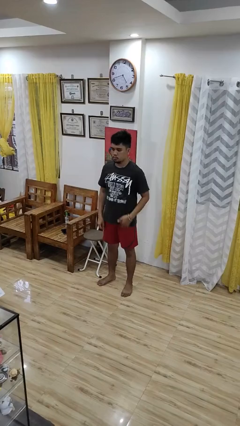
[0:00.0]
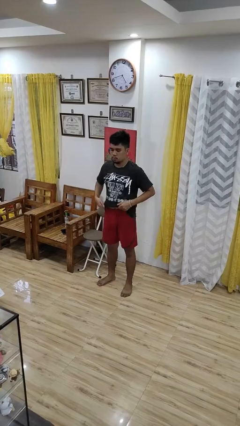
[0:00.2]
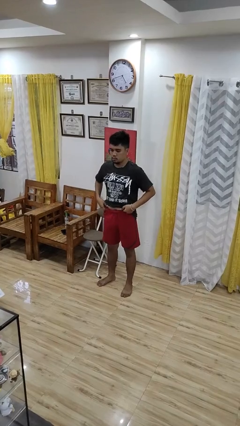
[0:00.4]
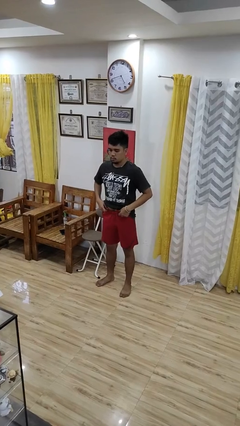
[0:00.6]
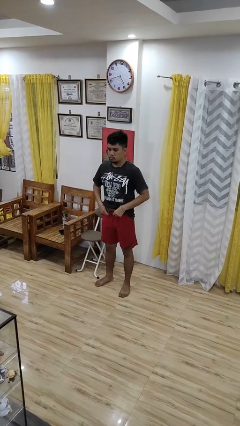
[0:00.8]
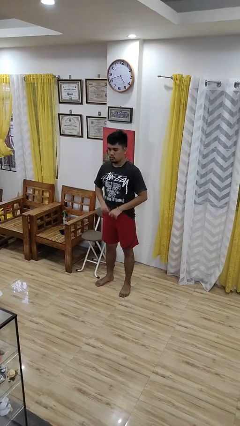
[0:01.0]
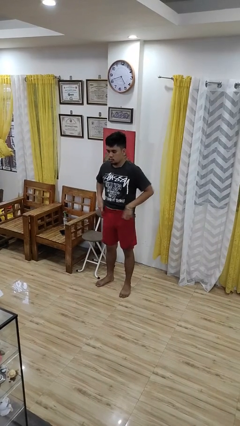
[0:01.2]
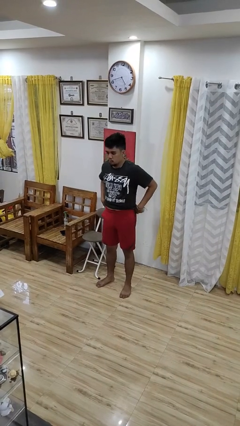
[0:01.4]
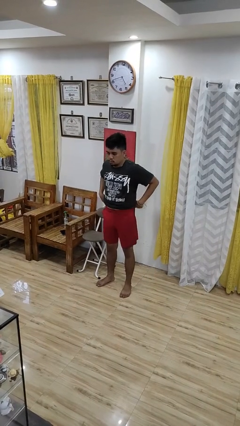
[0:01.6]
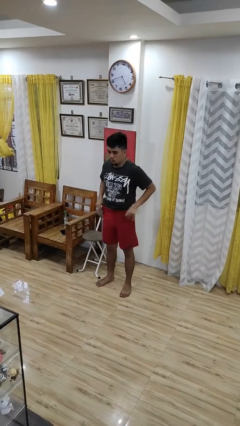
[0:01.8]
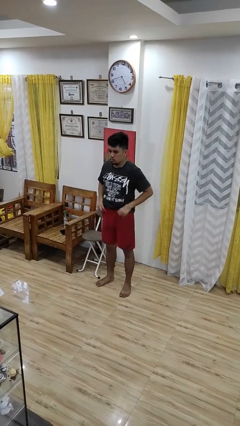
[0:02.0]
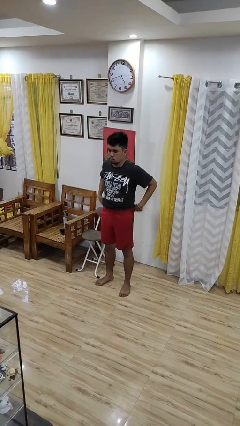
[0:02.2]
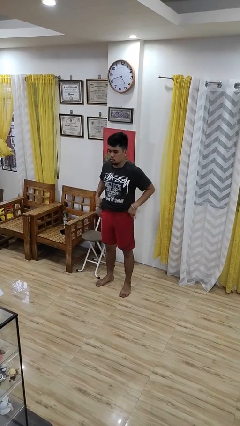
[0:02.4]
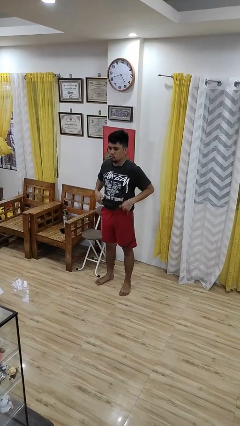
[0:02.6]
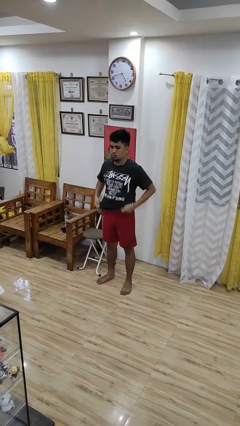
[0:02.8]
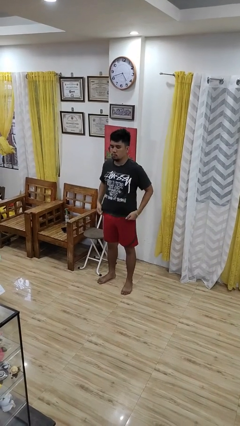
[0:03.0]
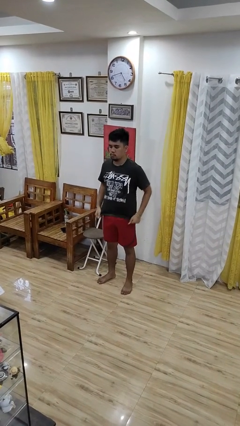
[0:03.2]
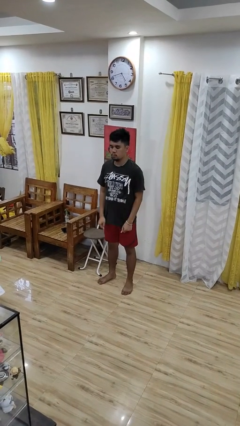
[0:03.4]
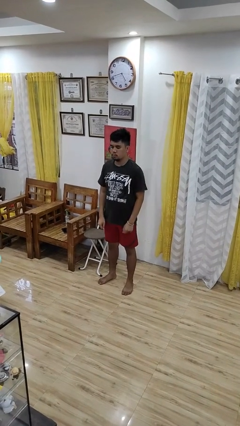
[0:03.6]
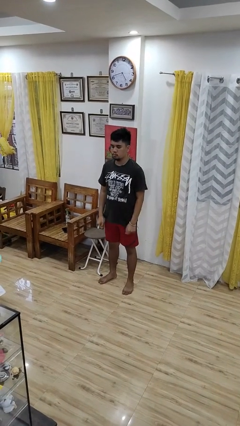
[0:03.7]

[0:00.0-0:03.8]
person hikes up pants

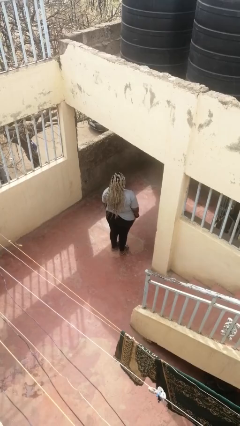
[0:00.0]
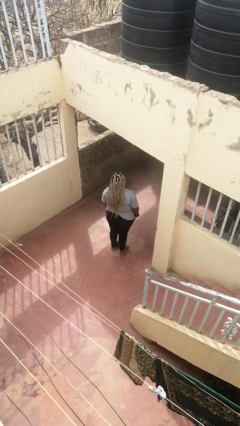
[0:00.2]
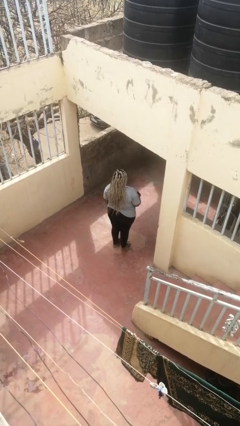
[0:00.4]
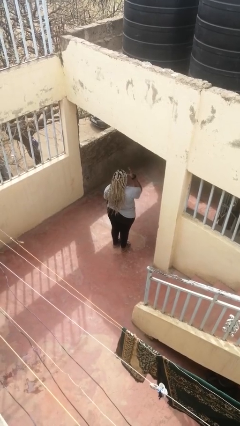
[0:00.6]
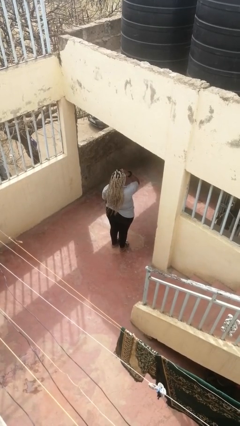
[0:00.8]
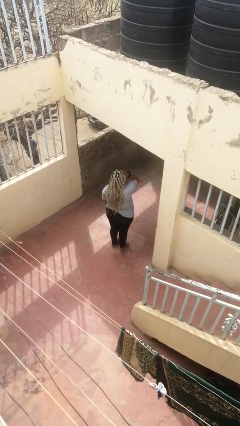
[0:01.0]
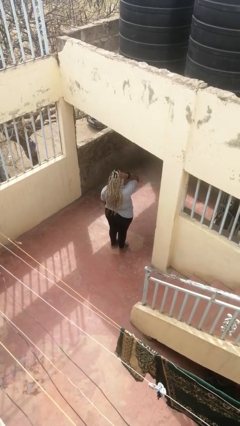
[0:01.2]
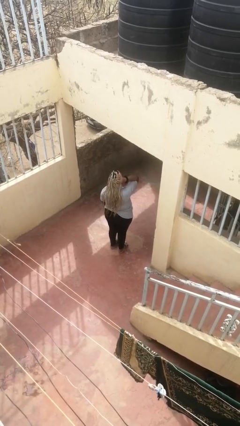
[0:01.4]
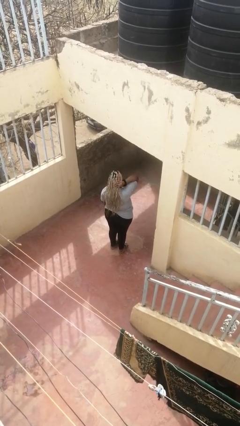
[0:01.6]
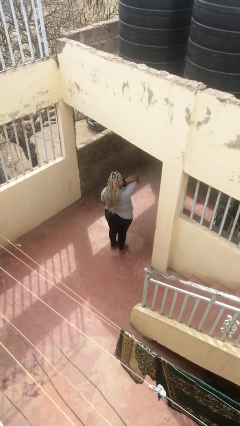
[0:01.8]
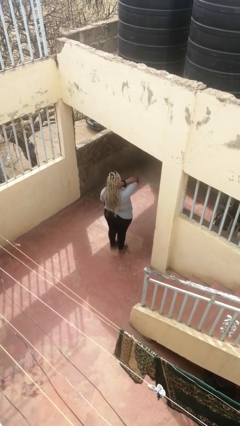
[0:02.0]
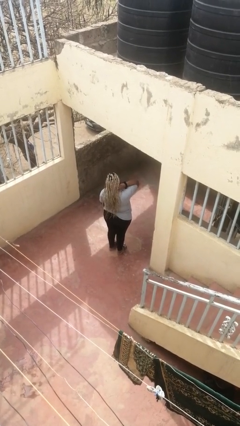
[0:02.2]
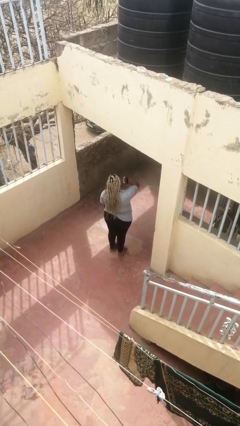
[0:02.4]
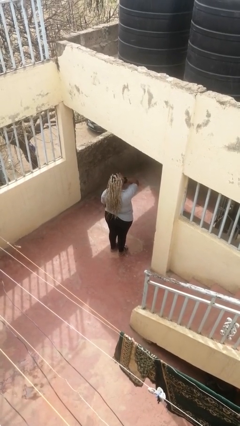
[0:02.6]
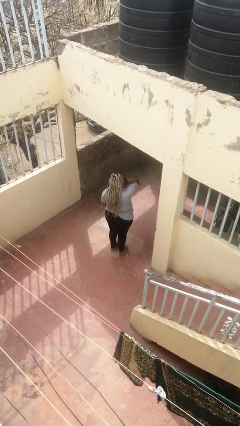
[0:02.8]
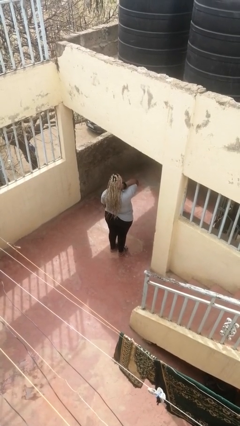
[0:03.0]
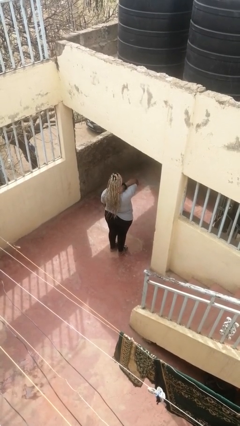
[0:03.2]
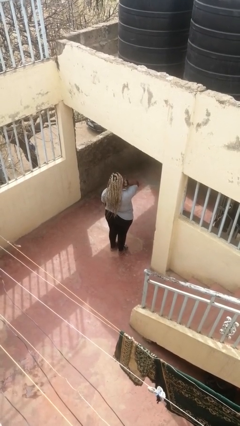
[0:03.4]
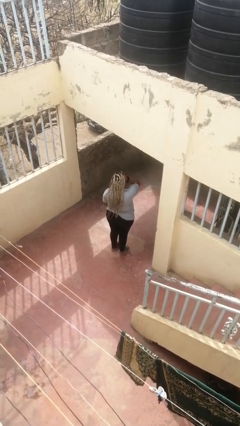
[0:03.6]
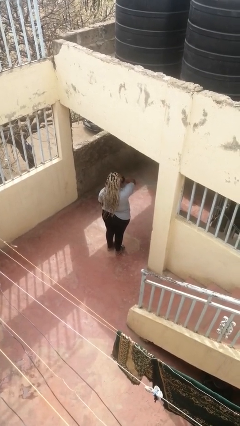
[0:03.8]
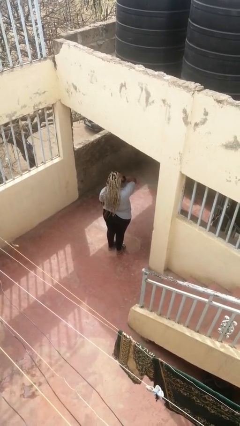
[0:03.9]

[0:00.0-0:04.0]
person strokes hair

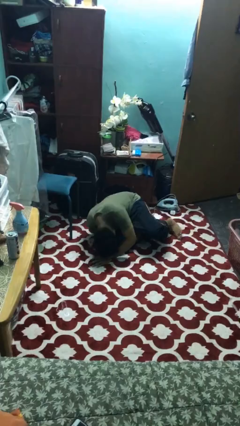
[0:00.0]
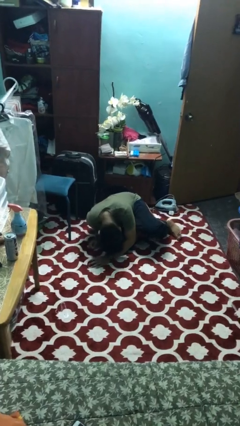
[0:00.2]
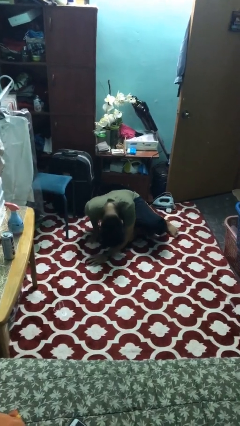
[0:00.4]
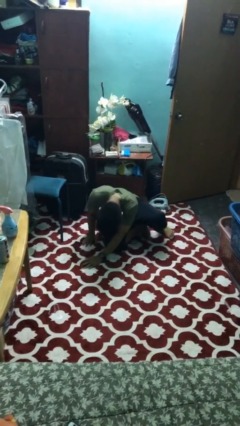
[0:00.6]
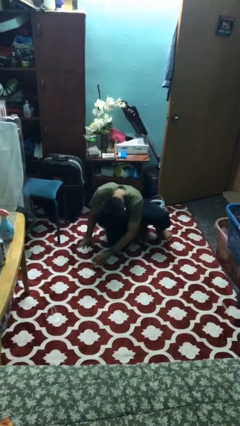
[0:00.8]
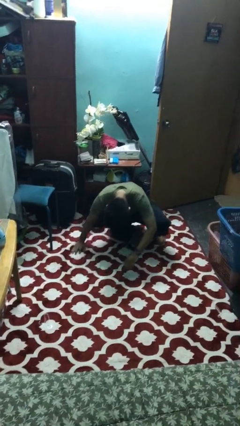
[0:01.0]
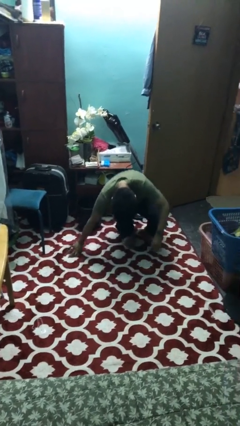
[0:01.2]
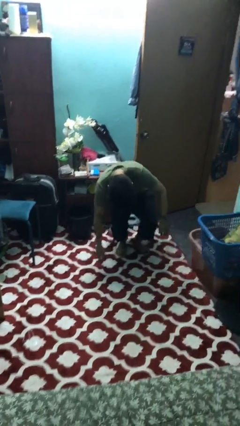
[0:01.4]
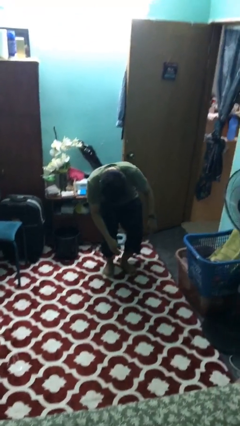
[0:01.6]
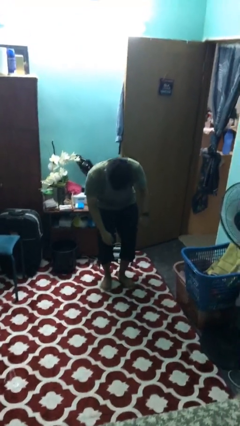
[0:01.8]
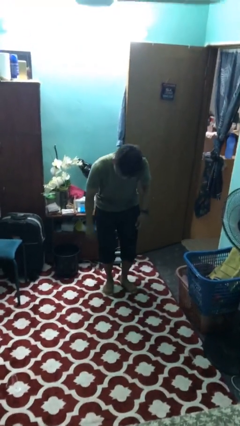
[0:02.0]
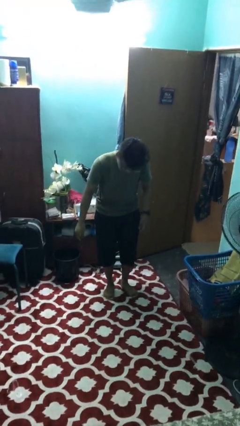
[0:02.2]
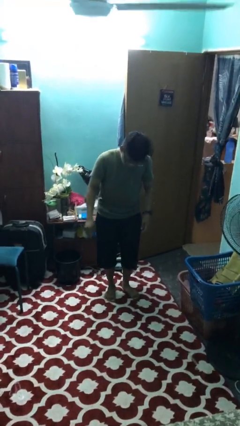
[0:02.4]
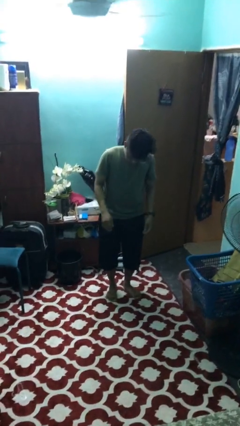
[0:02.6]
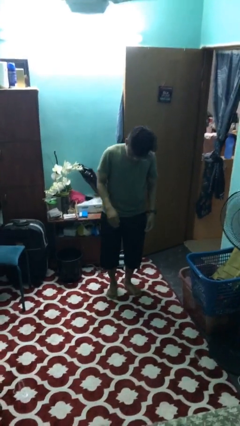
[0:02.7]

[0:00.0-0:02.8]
person stands up from floor

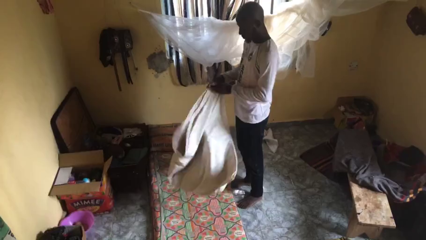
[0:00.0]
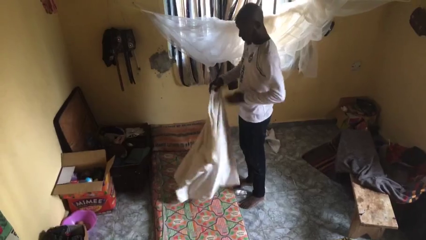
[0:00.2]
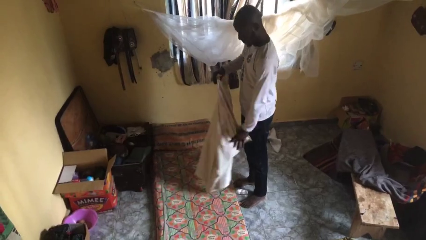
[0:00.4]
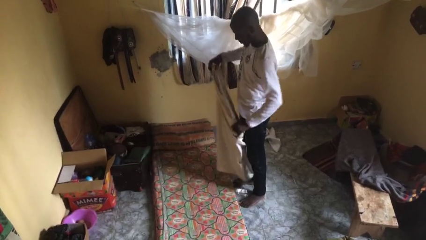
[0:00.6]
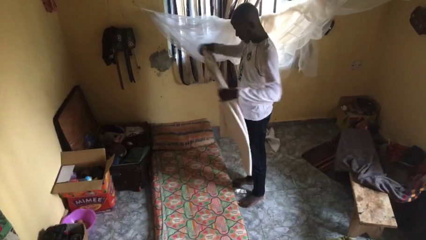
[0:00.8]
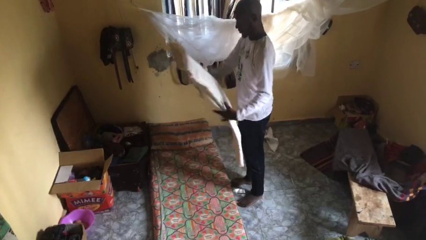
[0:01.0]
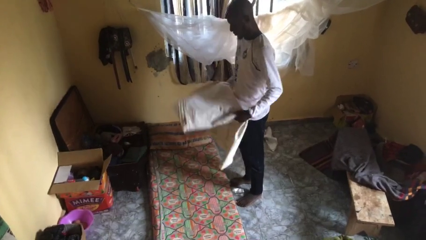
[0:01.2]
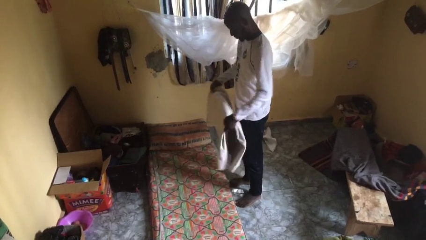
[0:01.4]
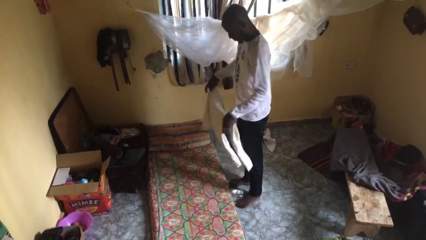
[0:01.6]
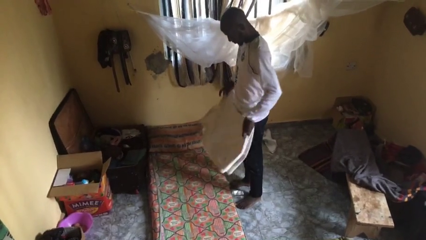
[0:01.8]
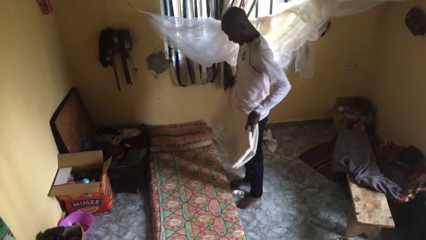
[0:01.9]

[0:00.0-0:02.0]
person folds blanket

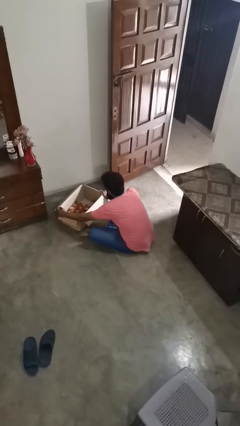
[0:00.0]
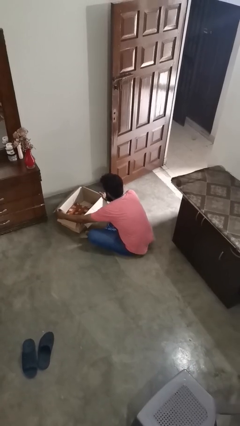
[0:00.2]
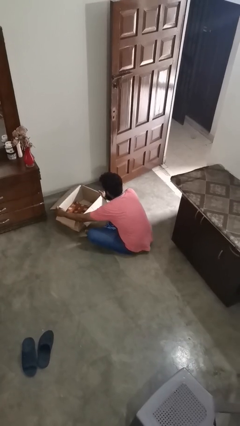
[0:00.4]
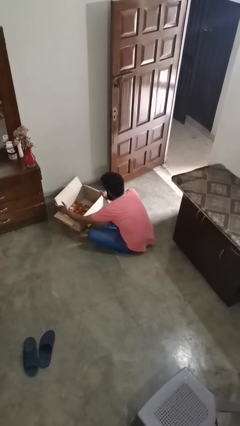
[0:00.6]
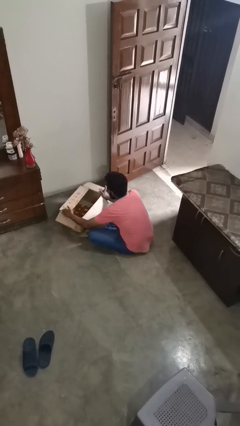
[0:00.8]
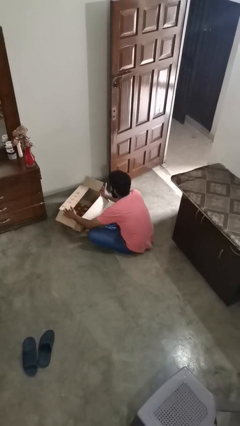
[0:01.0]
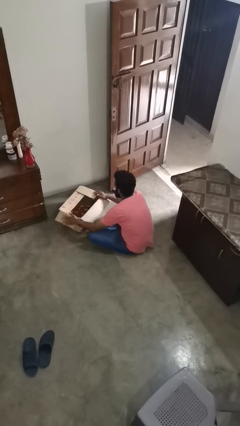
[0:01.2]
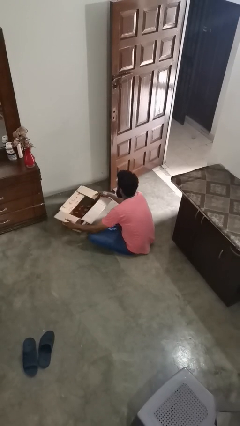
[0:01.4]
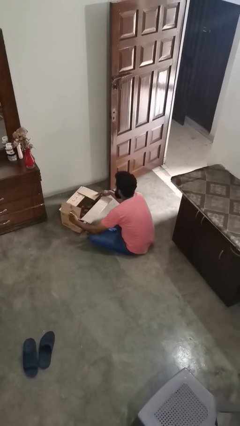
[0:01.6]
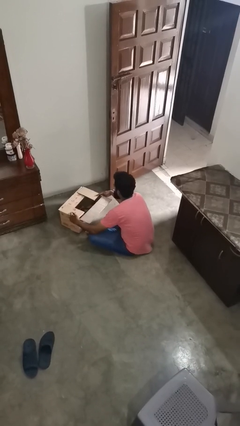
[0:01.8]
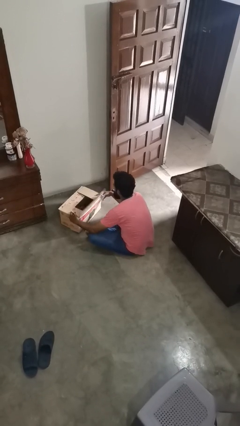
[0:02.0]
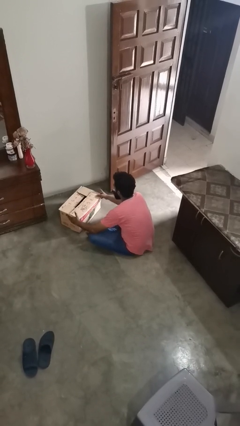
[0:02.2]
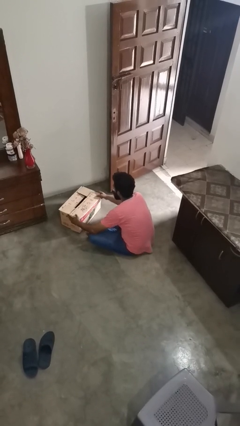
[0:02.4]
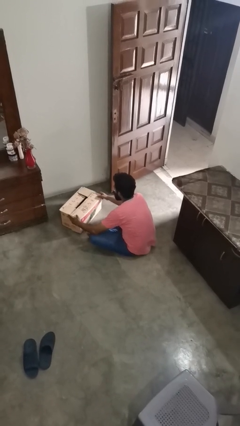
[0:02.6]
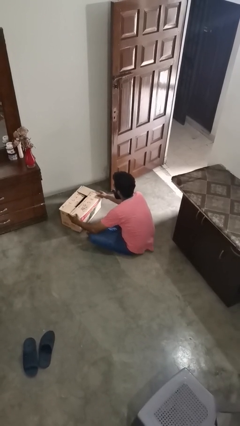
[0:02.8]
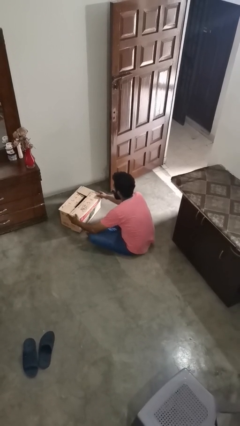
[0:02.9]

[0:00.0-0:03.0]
person closes box

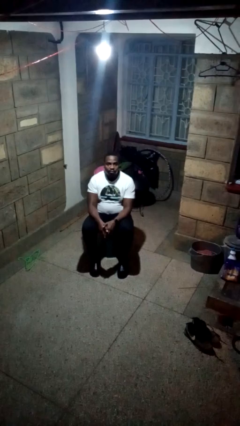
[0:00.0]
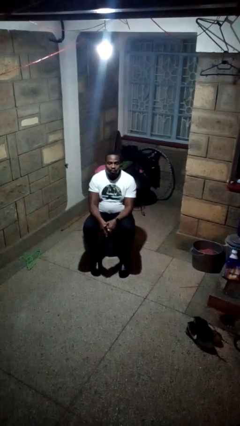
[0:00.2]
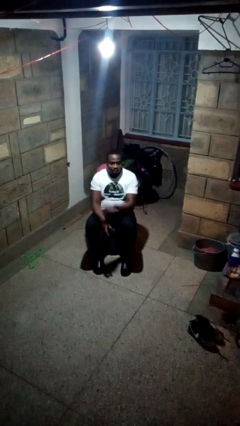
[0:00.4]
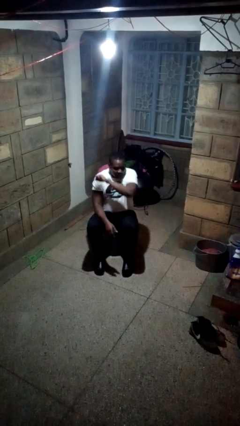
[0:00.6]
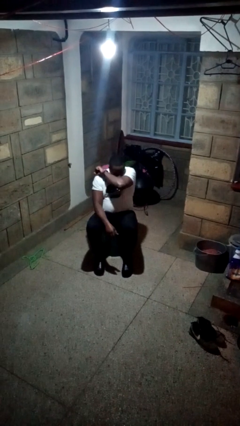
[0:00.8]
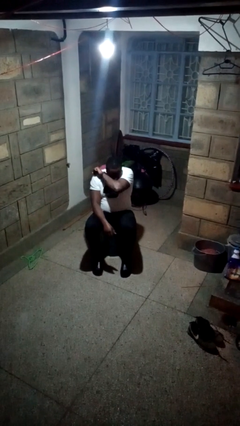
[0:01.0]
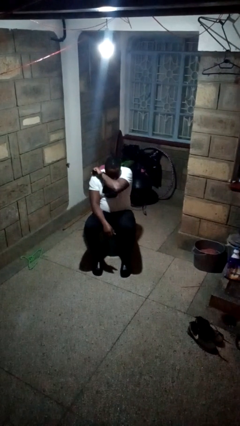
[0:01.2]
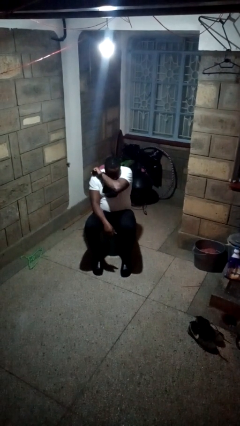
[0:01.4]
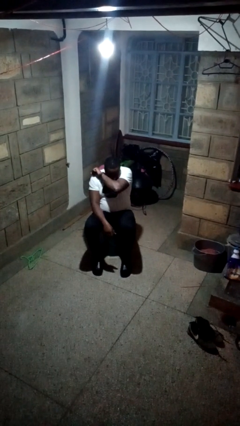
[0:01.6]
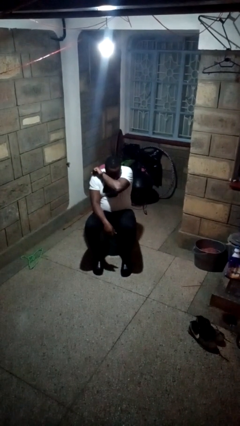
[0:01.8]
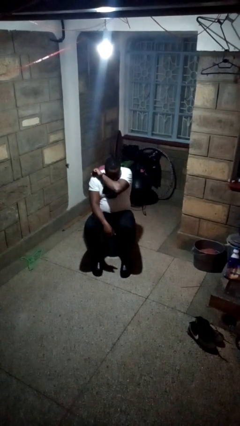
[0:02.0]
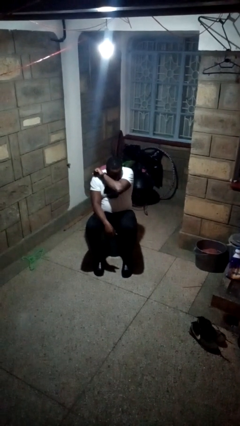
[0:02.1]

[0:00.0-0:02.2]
person sneezes into arm
